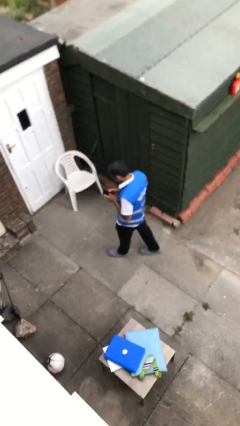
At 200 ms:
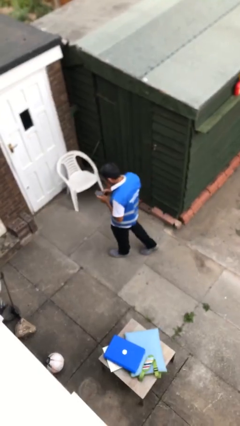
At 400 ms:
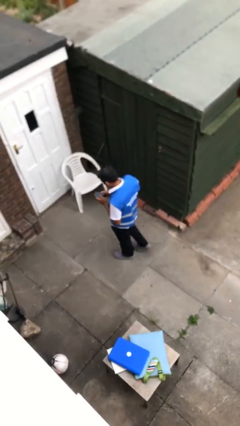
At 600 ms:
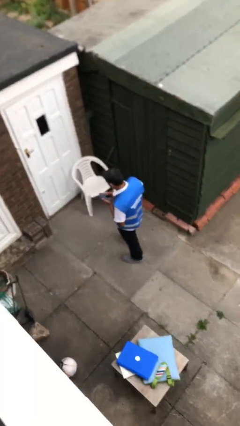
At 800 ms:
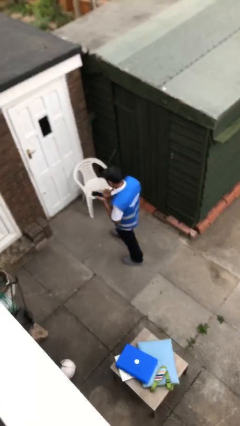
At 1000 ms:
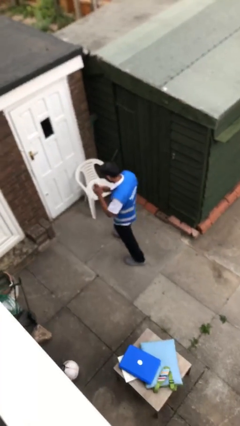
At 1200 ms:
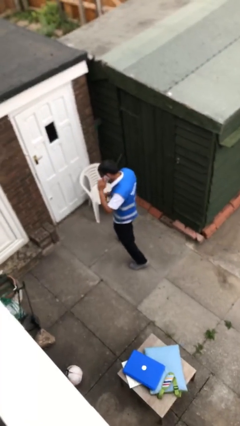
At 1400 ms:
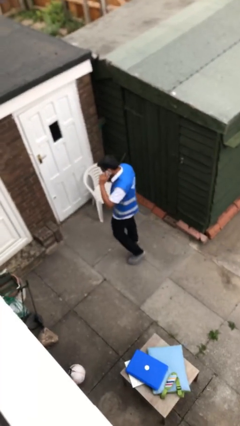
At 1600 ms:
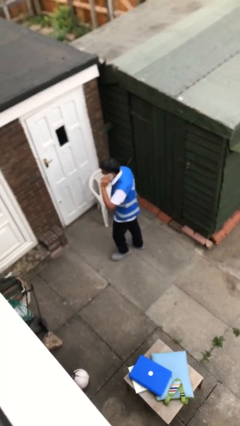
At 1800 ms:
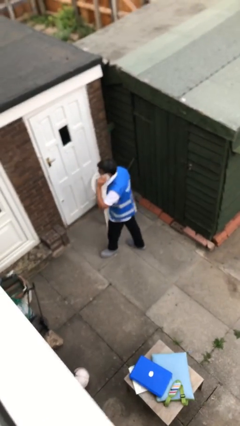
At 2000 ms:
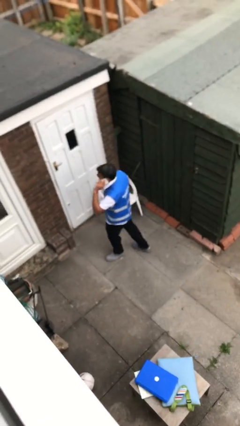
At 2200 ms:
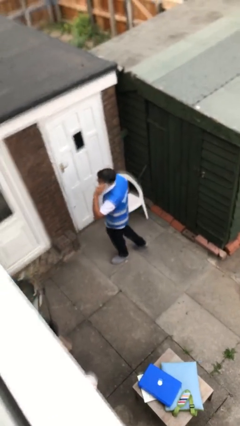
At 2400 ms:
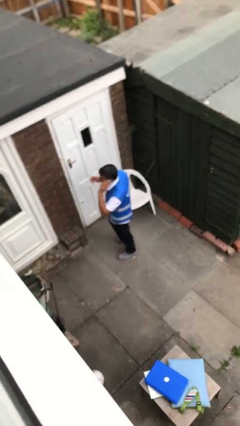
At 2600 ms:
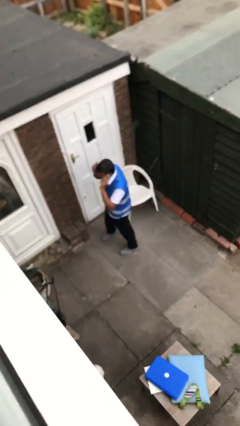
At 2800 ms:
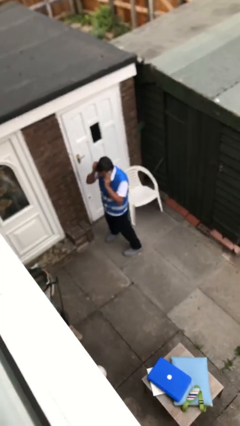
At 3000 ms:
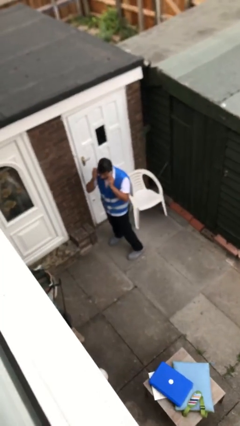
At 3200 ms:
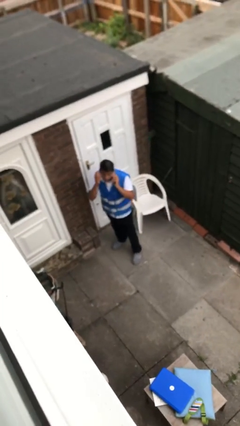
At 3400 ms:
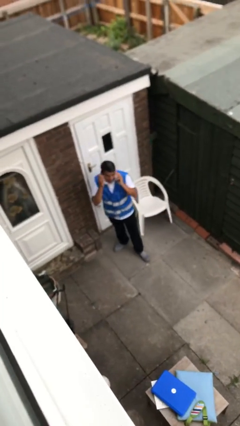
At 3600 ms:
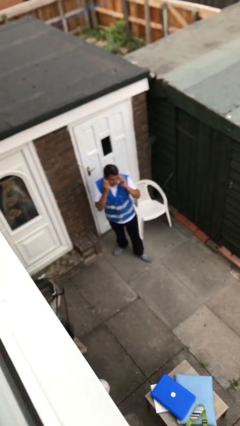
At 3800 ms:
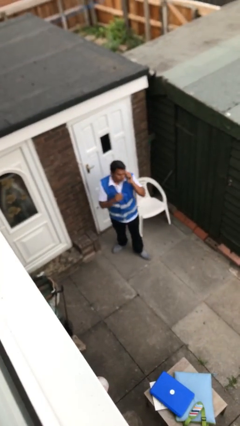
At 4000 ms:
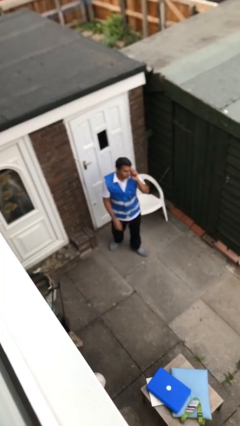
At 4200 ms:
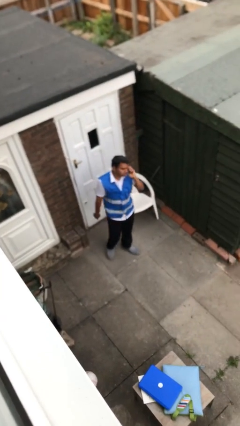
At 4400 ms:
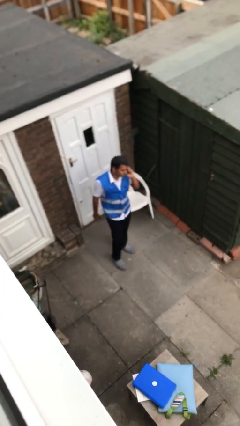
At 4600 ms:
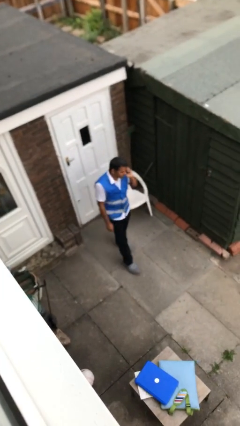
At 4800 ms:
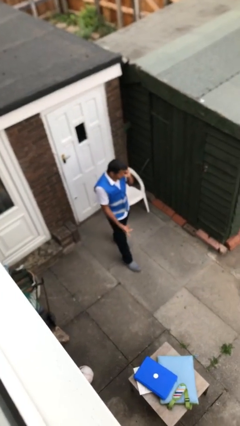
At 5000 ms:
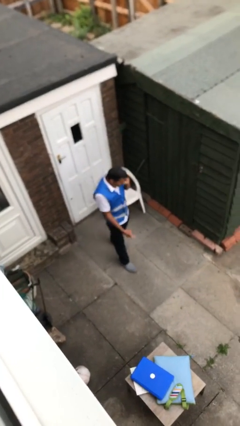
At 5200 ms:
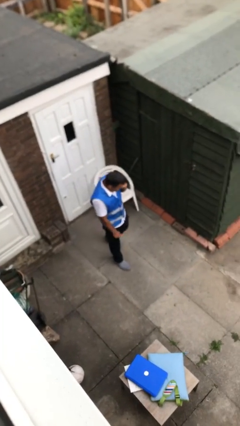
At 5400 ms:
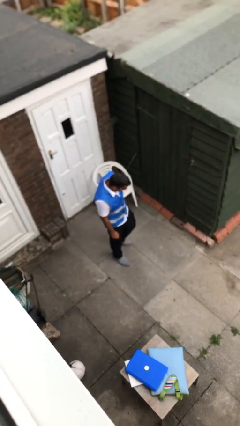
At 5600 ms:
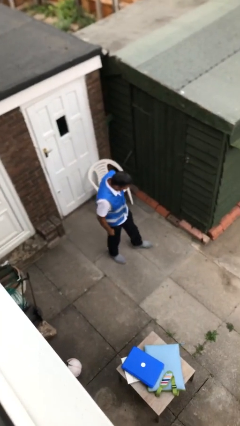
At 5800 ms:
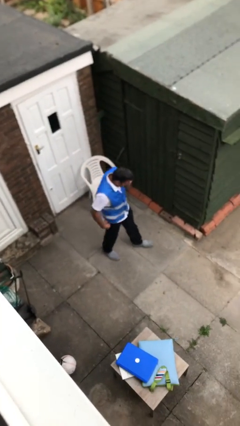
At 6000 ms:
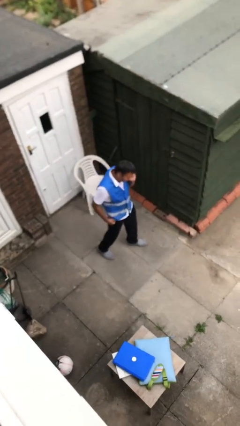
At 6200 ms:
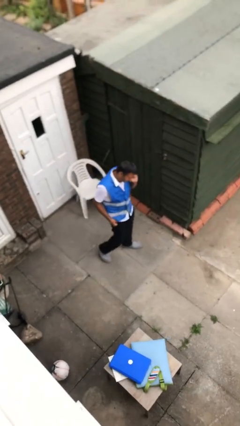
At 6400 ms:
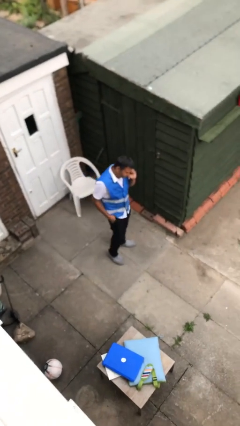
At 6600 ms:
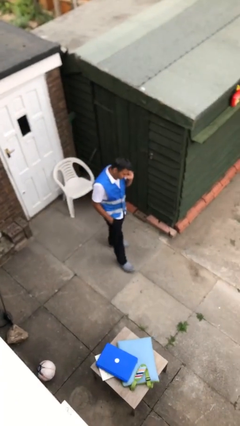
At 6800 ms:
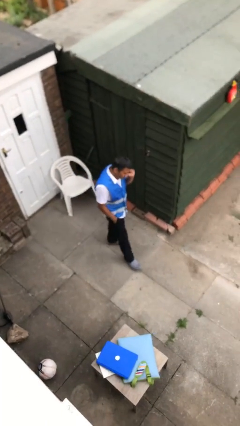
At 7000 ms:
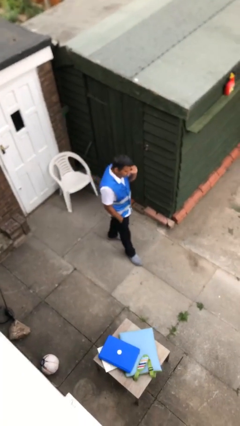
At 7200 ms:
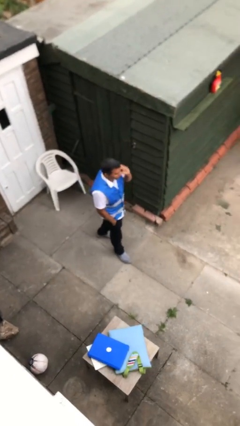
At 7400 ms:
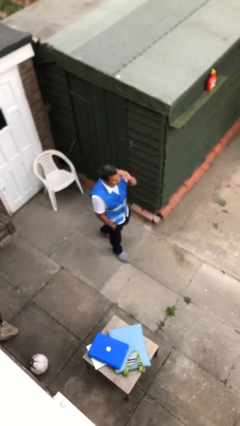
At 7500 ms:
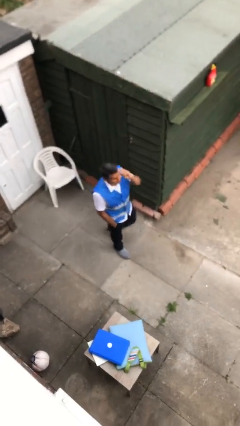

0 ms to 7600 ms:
person talks on phone

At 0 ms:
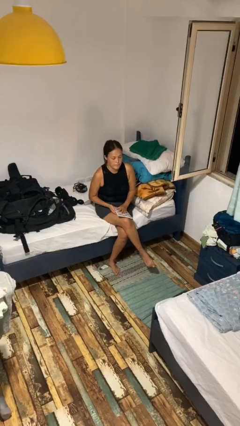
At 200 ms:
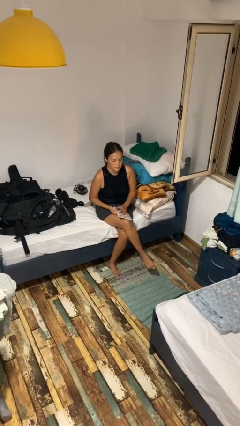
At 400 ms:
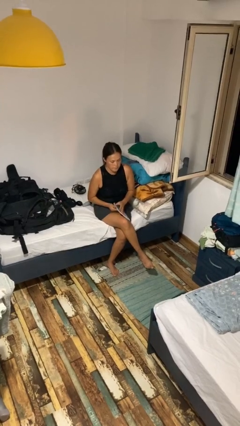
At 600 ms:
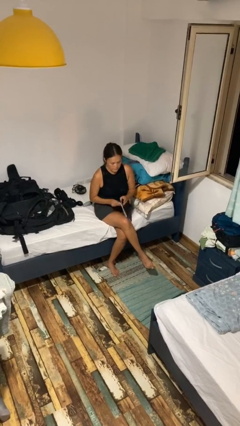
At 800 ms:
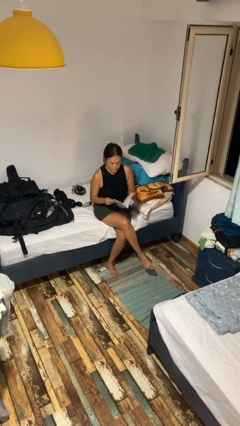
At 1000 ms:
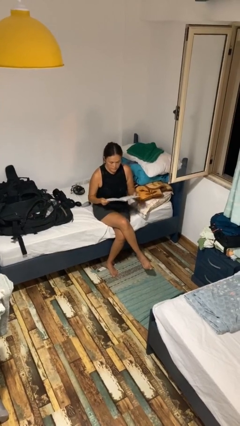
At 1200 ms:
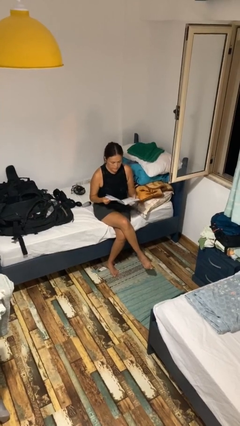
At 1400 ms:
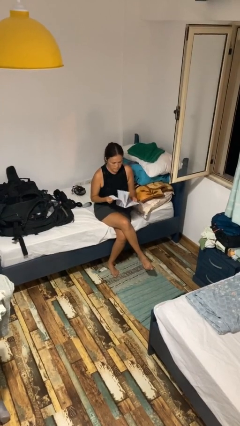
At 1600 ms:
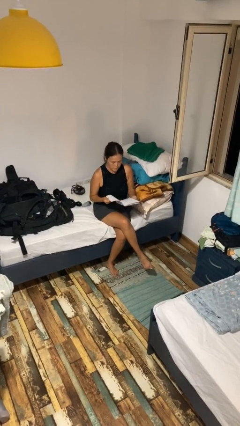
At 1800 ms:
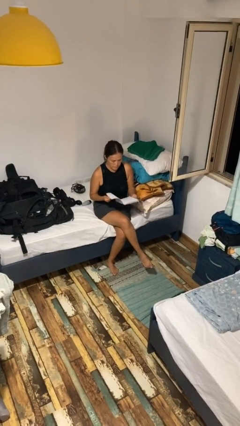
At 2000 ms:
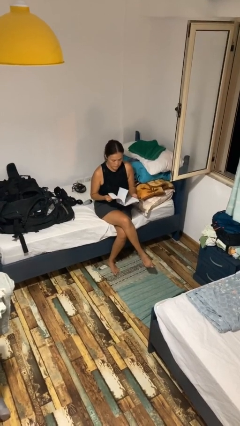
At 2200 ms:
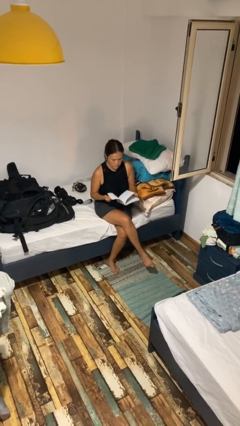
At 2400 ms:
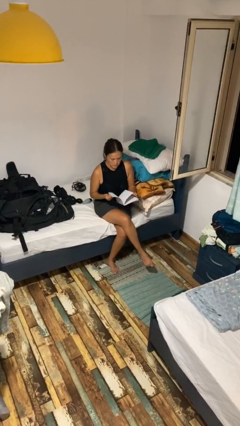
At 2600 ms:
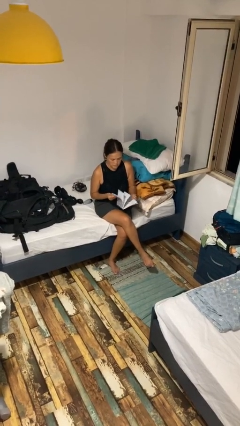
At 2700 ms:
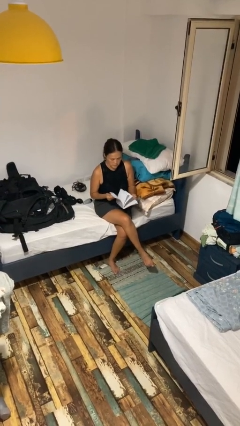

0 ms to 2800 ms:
person reads magazine

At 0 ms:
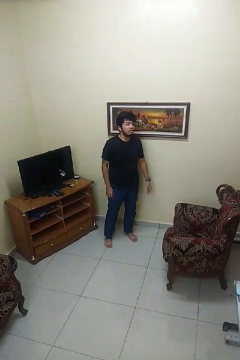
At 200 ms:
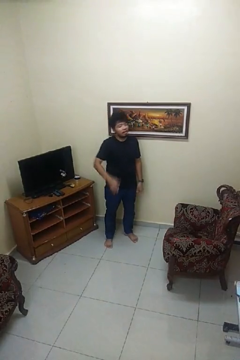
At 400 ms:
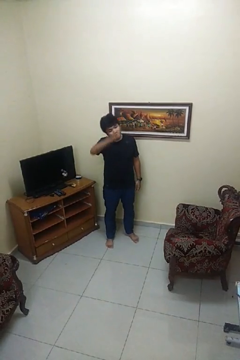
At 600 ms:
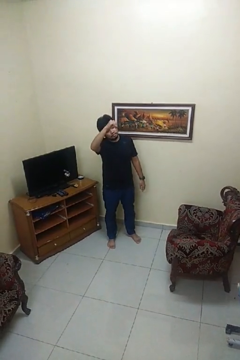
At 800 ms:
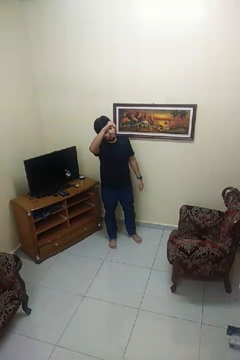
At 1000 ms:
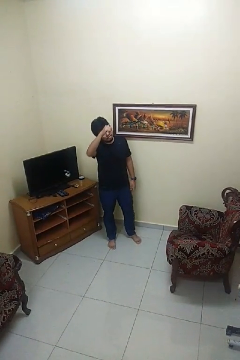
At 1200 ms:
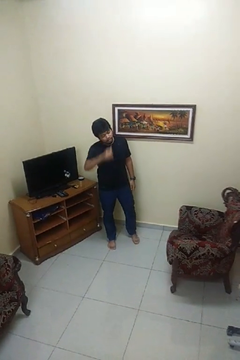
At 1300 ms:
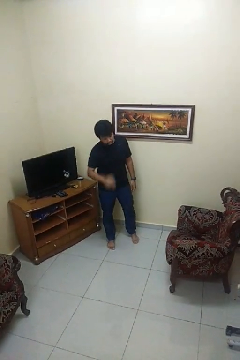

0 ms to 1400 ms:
person gestures come here

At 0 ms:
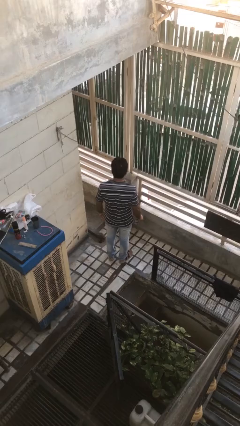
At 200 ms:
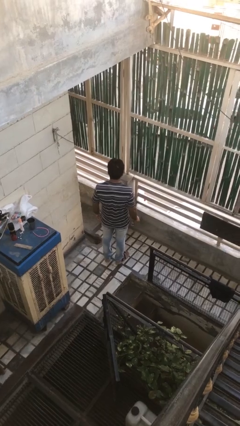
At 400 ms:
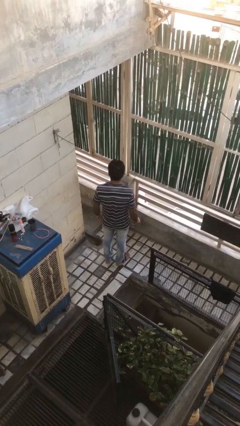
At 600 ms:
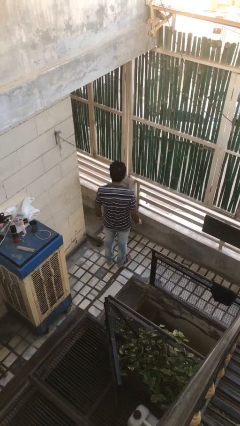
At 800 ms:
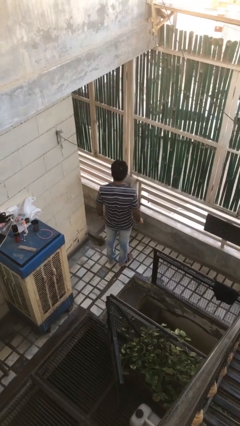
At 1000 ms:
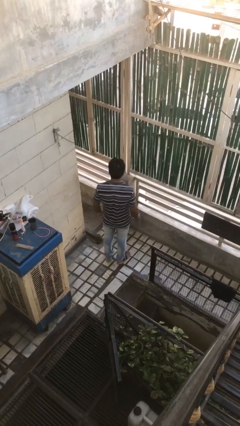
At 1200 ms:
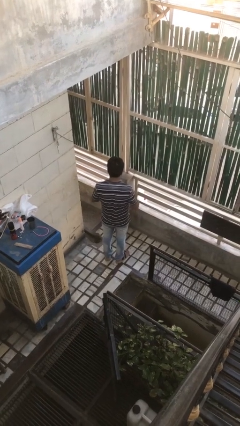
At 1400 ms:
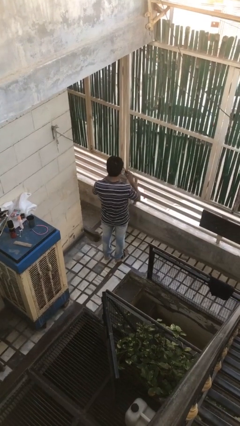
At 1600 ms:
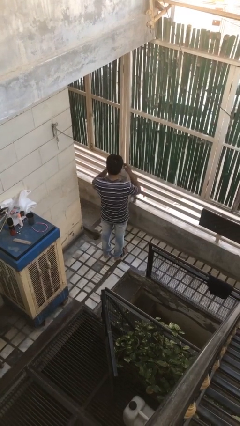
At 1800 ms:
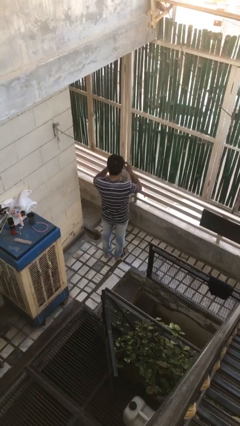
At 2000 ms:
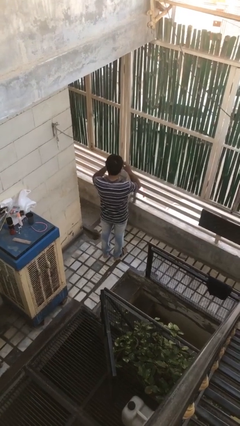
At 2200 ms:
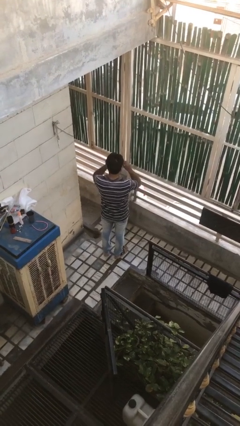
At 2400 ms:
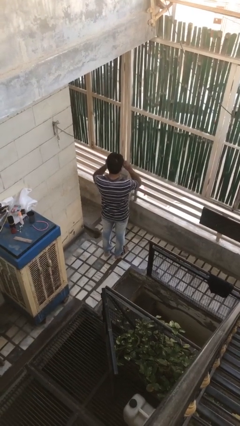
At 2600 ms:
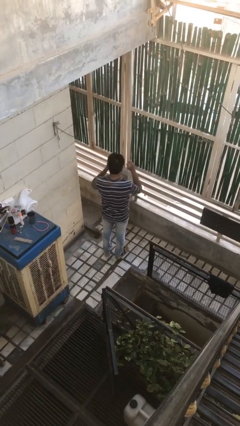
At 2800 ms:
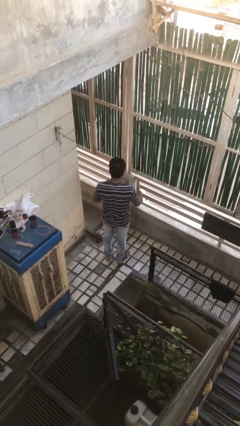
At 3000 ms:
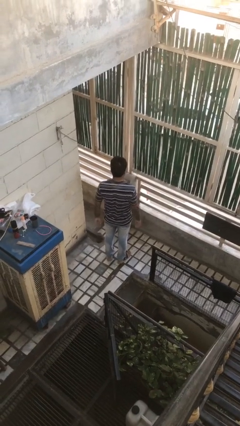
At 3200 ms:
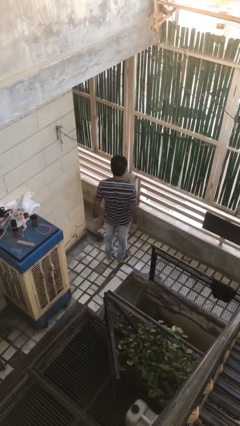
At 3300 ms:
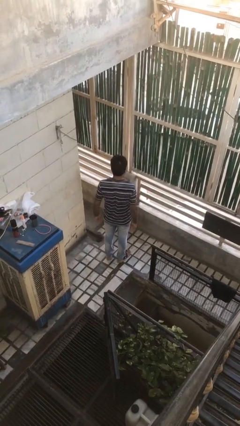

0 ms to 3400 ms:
person puts on sunglasses

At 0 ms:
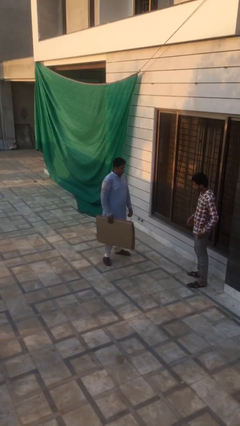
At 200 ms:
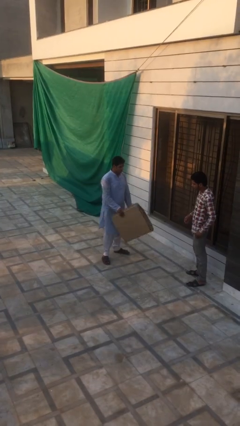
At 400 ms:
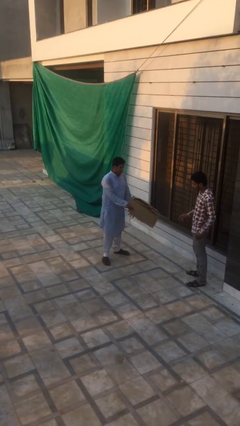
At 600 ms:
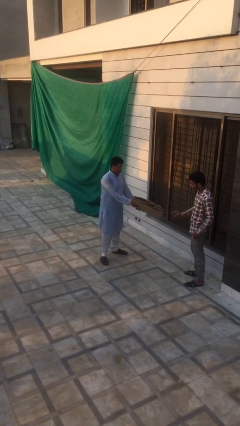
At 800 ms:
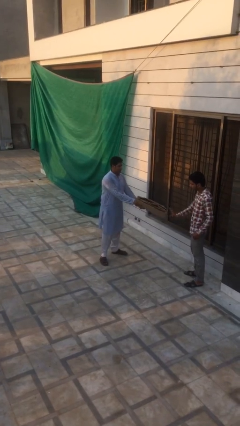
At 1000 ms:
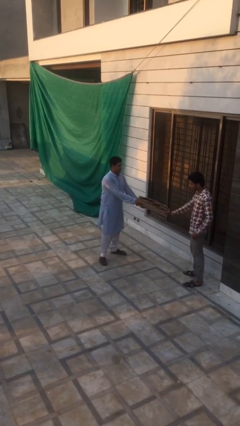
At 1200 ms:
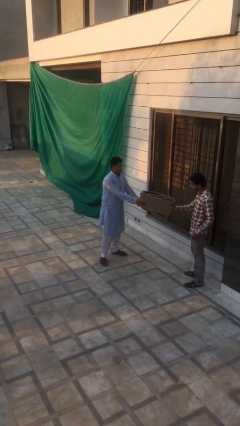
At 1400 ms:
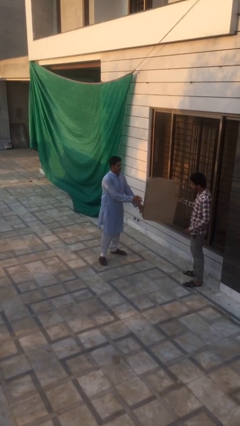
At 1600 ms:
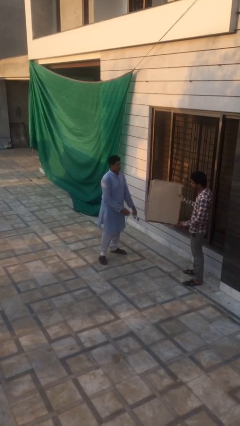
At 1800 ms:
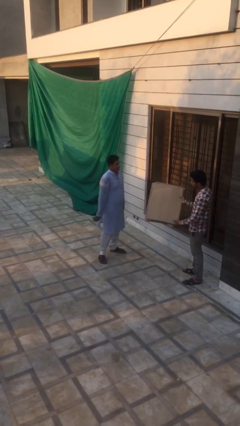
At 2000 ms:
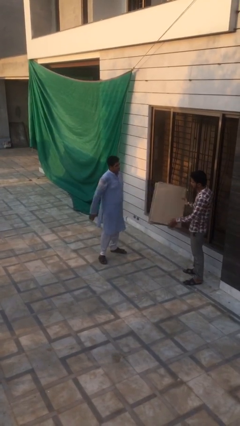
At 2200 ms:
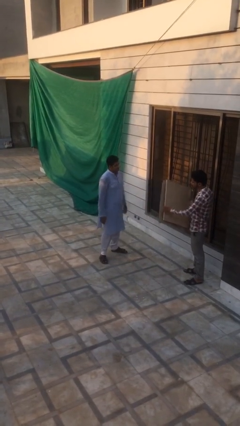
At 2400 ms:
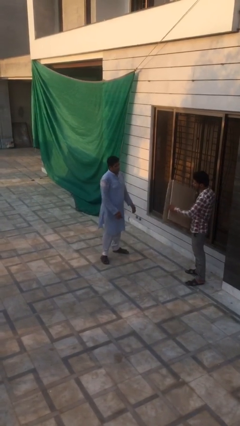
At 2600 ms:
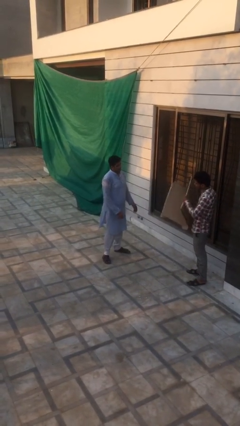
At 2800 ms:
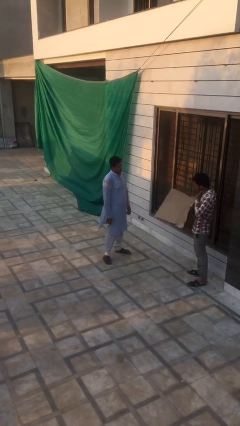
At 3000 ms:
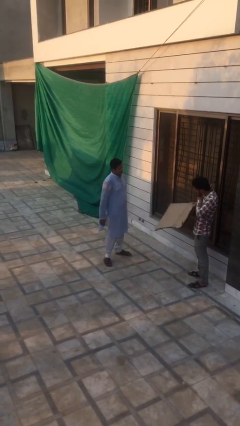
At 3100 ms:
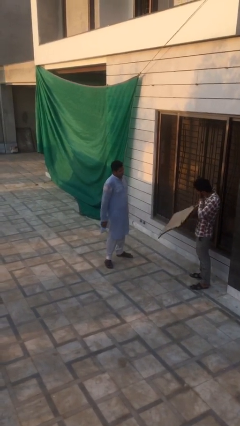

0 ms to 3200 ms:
person transfers object to person
